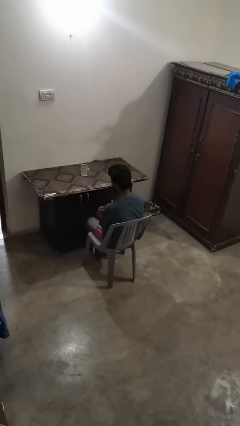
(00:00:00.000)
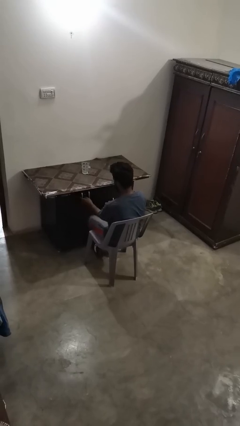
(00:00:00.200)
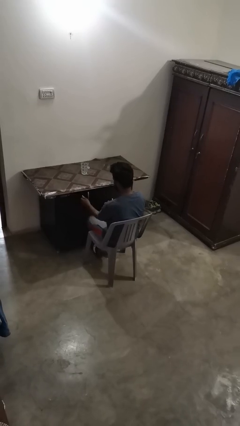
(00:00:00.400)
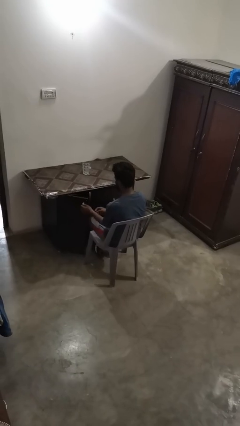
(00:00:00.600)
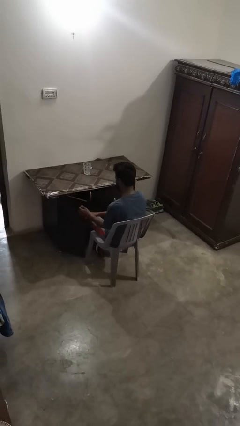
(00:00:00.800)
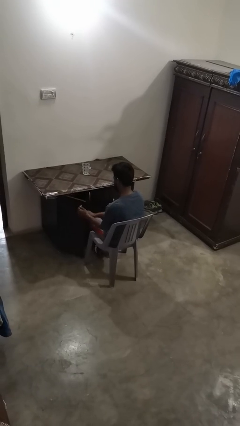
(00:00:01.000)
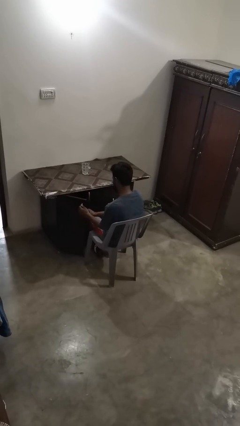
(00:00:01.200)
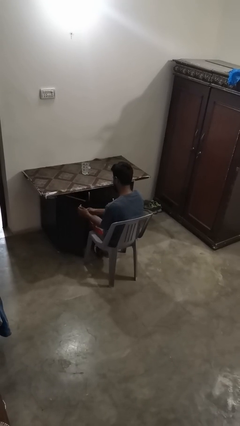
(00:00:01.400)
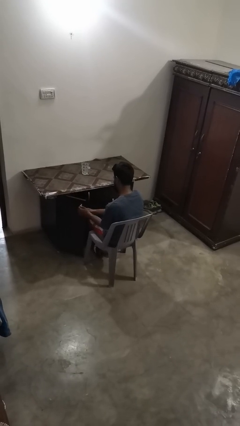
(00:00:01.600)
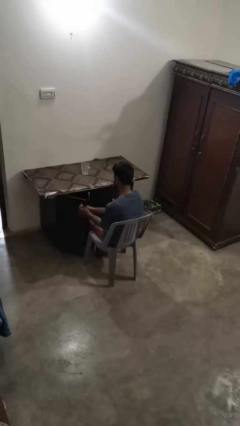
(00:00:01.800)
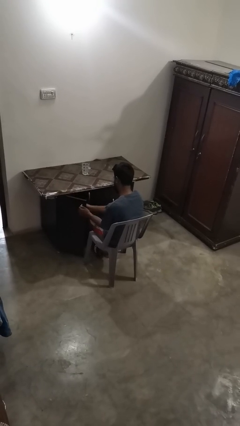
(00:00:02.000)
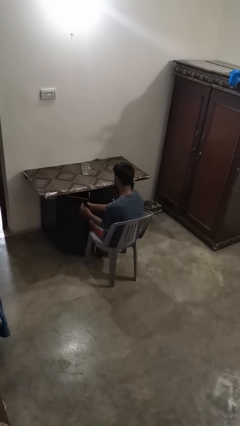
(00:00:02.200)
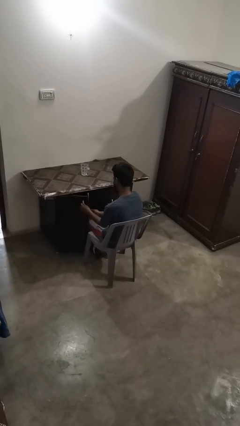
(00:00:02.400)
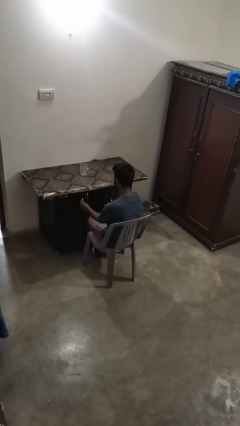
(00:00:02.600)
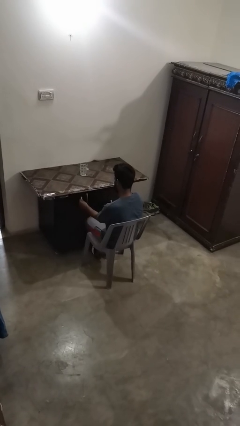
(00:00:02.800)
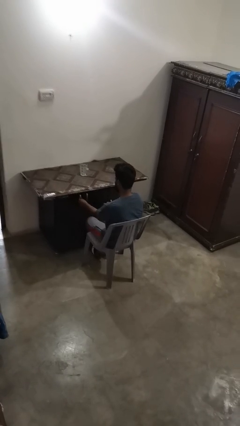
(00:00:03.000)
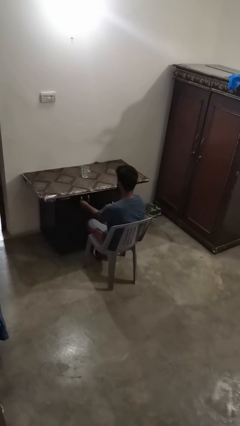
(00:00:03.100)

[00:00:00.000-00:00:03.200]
person sets upright furniture

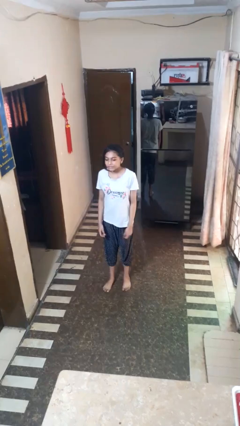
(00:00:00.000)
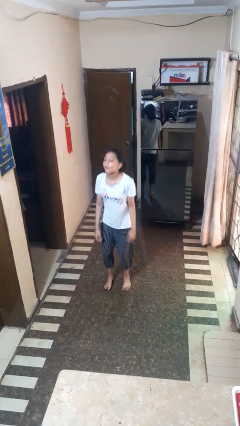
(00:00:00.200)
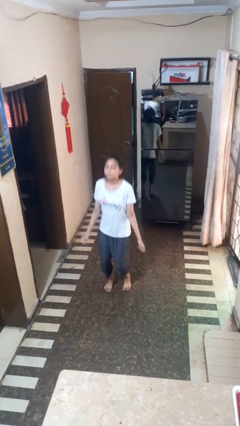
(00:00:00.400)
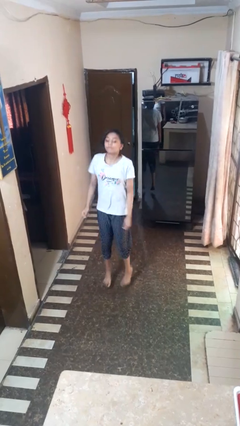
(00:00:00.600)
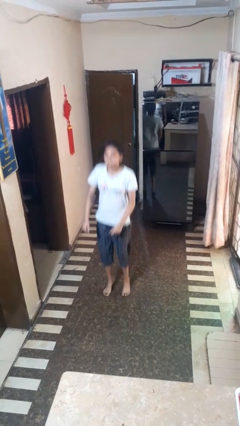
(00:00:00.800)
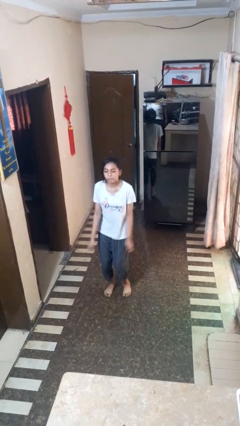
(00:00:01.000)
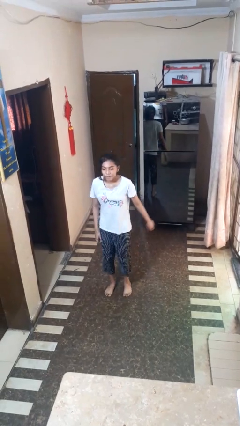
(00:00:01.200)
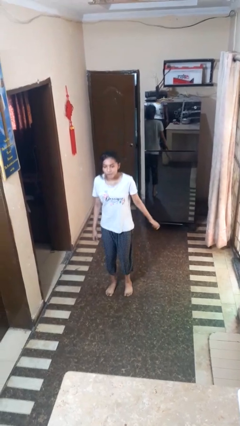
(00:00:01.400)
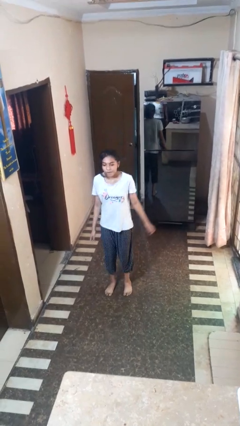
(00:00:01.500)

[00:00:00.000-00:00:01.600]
person jumps

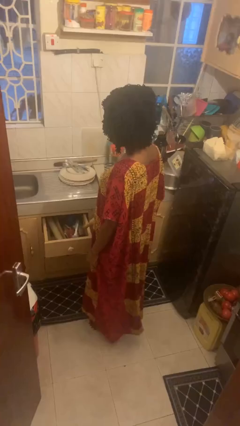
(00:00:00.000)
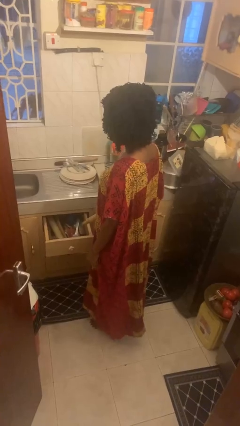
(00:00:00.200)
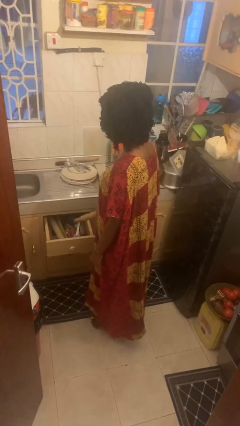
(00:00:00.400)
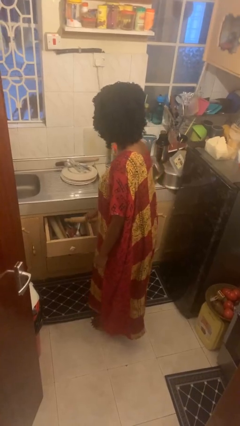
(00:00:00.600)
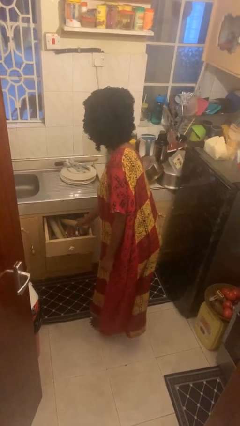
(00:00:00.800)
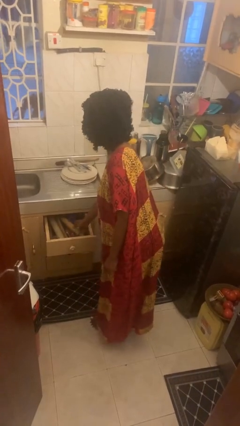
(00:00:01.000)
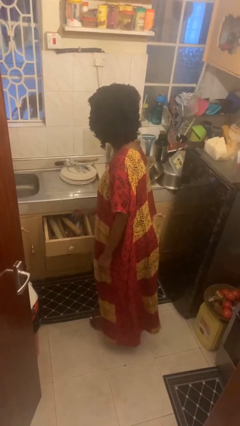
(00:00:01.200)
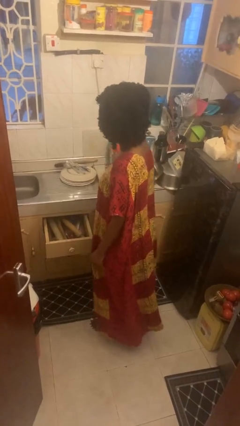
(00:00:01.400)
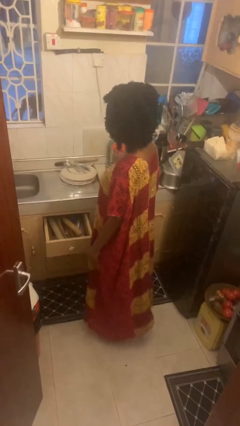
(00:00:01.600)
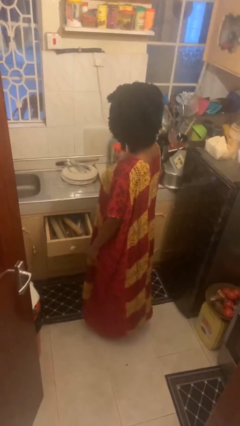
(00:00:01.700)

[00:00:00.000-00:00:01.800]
person puts object into kitchen drawer

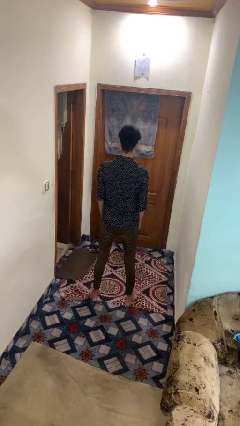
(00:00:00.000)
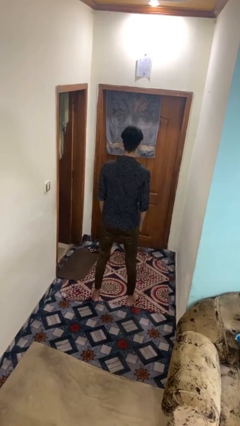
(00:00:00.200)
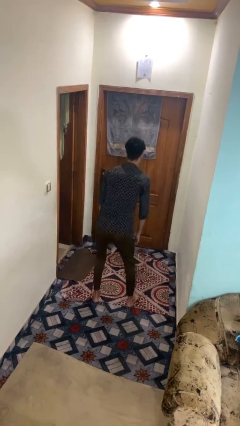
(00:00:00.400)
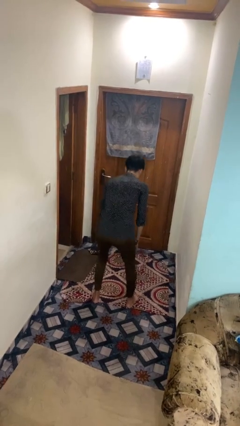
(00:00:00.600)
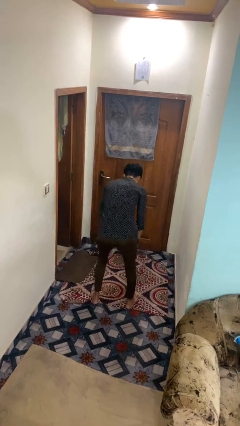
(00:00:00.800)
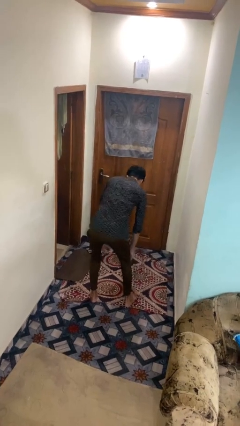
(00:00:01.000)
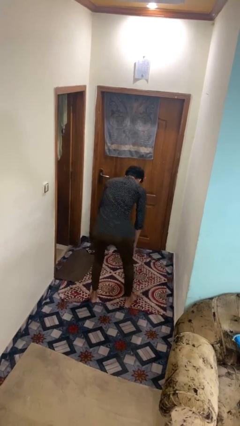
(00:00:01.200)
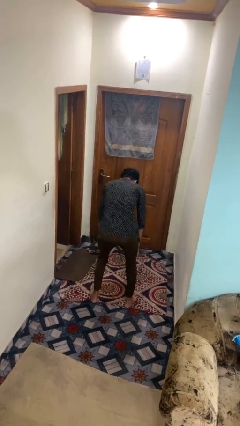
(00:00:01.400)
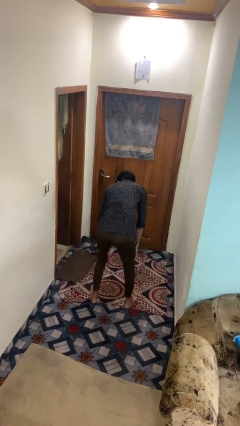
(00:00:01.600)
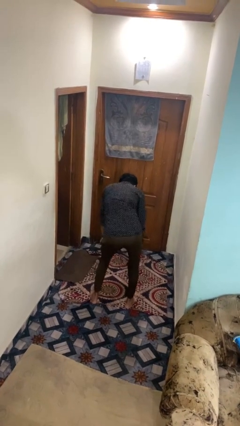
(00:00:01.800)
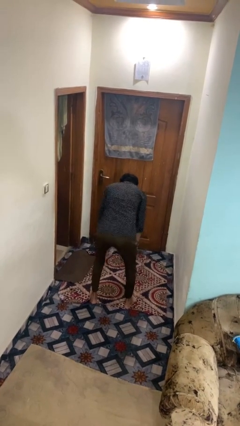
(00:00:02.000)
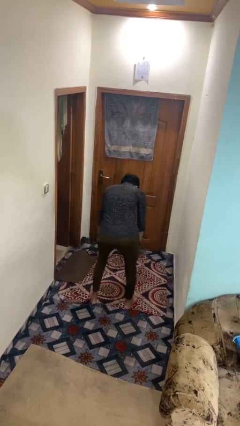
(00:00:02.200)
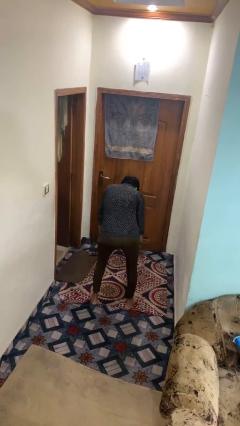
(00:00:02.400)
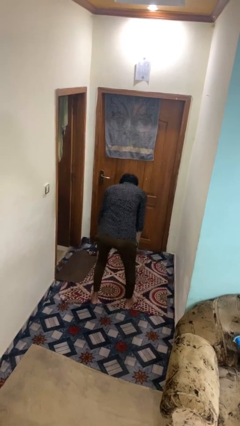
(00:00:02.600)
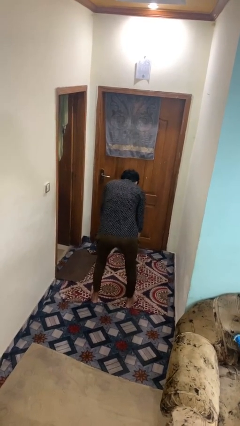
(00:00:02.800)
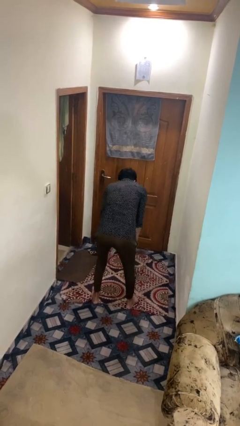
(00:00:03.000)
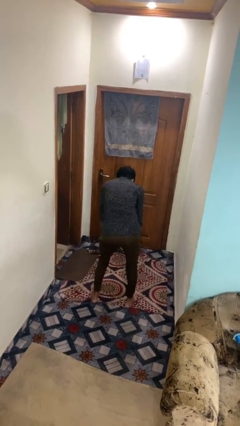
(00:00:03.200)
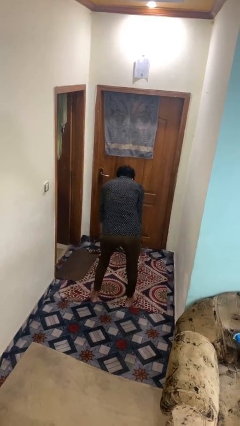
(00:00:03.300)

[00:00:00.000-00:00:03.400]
person wiggles hips

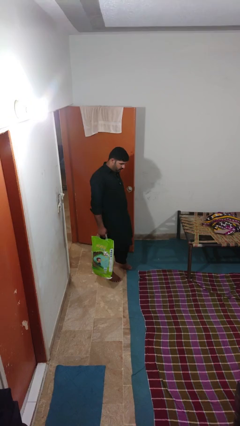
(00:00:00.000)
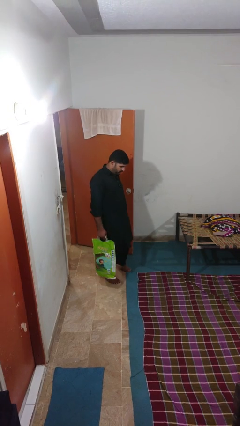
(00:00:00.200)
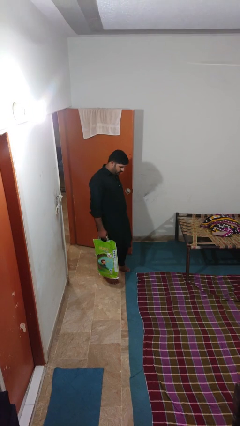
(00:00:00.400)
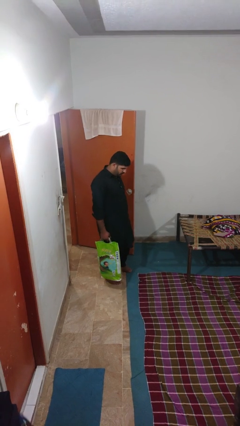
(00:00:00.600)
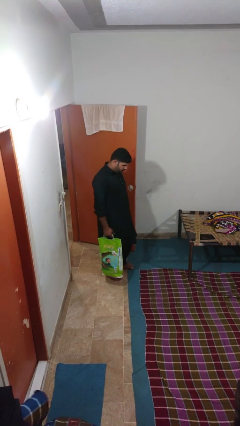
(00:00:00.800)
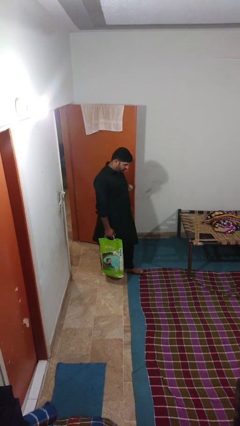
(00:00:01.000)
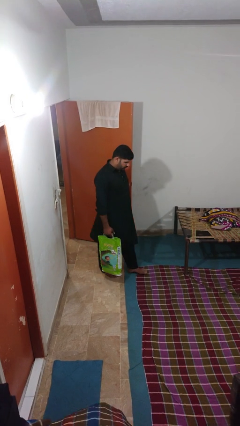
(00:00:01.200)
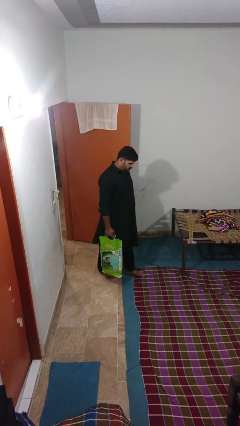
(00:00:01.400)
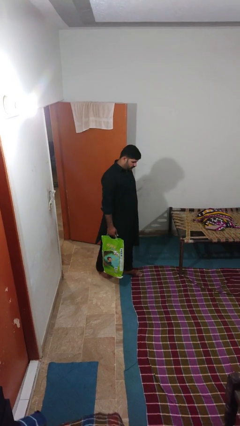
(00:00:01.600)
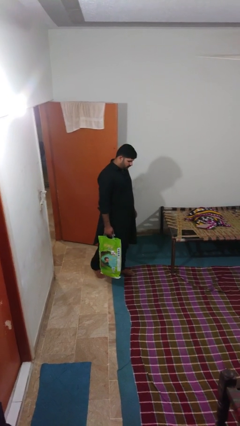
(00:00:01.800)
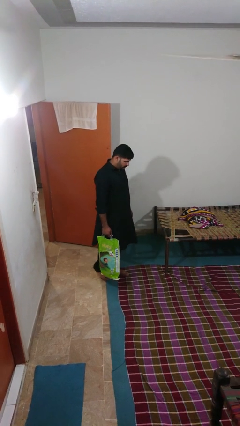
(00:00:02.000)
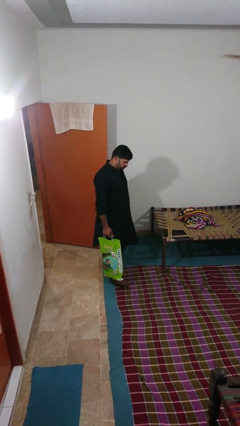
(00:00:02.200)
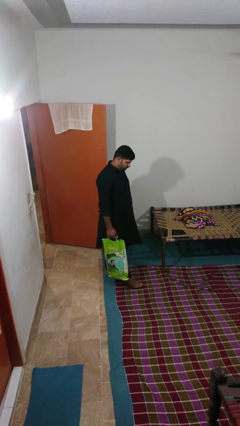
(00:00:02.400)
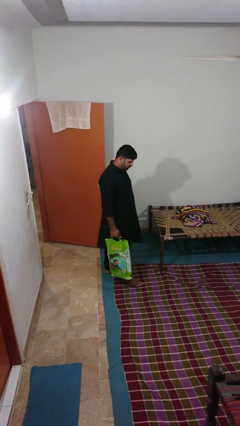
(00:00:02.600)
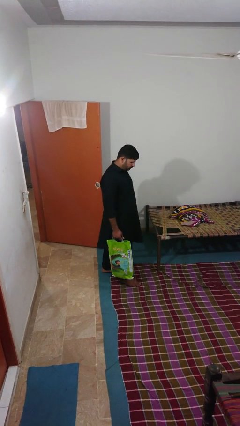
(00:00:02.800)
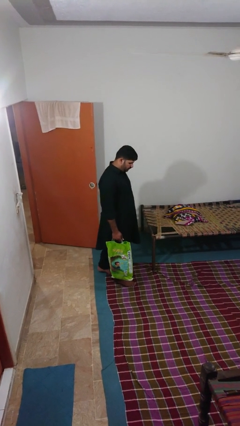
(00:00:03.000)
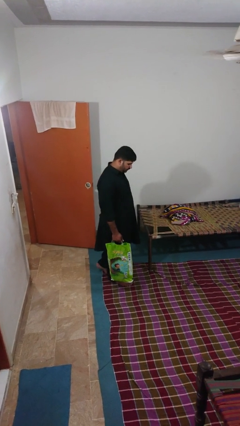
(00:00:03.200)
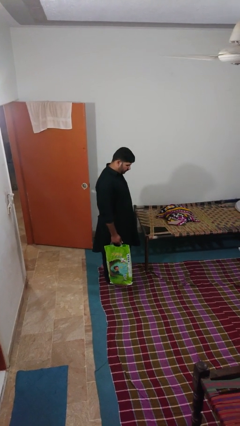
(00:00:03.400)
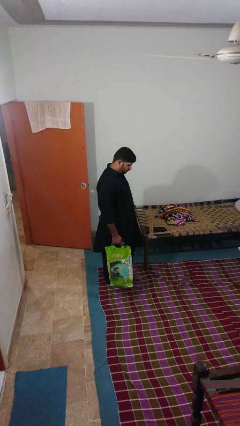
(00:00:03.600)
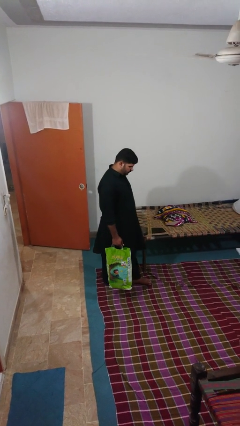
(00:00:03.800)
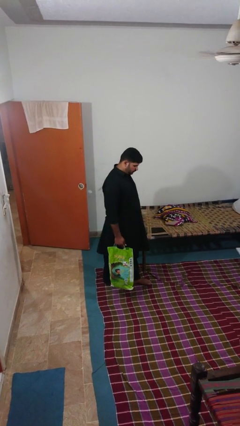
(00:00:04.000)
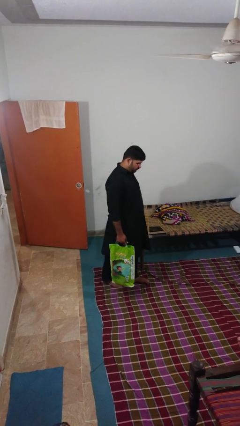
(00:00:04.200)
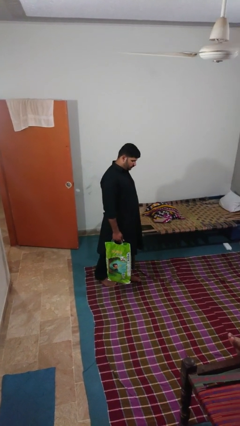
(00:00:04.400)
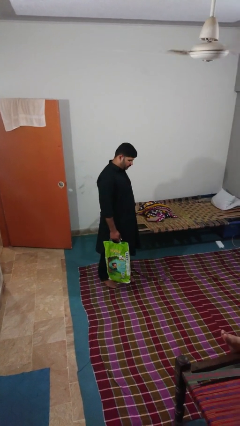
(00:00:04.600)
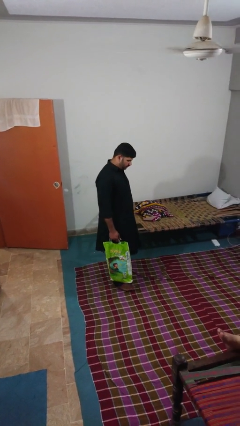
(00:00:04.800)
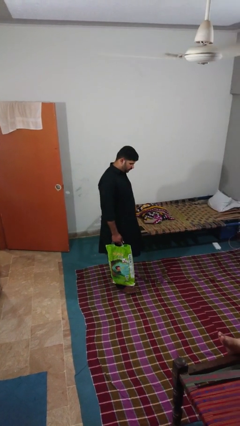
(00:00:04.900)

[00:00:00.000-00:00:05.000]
person carries groceries

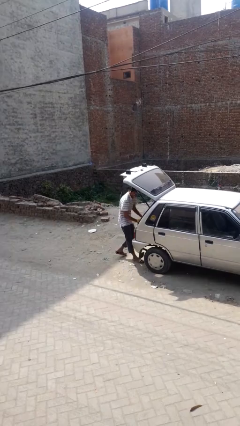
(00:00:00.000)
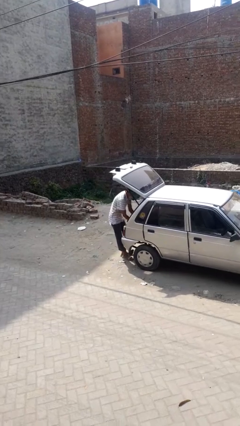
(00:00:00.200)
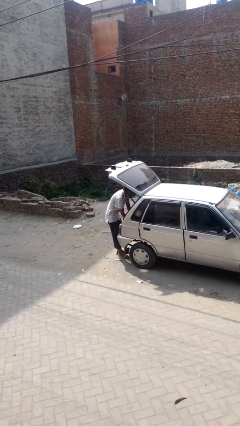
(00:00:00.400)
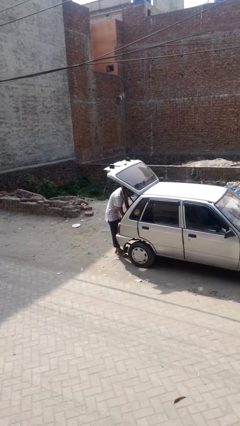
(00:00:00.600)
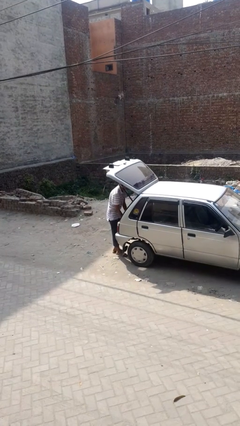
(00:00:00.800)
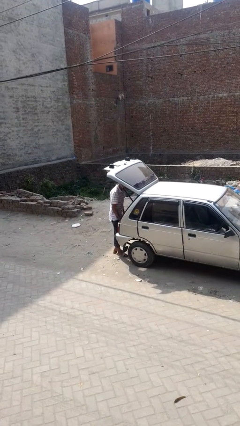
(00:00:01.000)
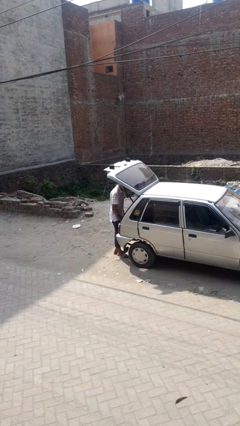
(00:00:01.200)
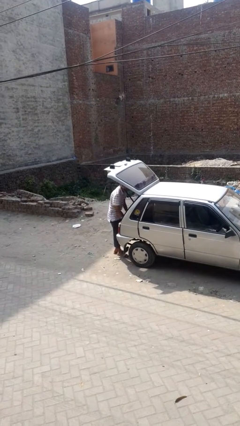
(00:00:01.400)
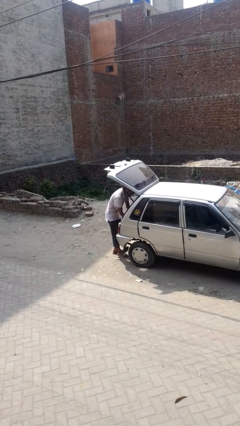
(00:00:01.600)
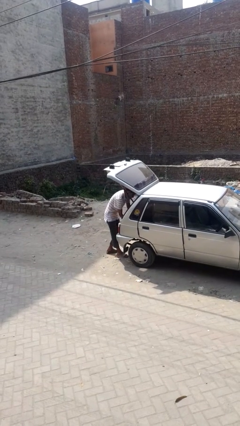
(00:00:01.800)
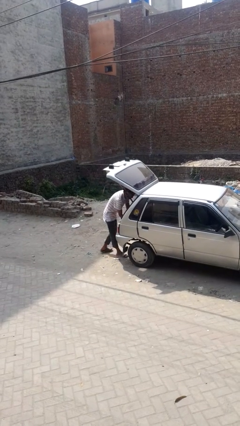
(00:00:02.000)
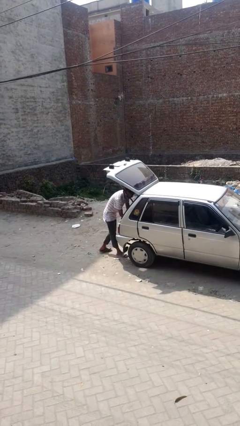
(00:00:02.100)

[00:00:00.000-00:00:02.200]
person loads car
